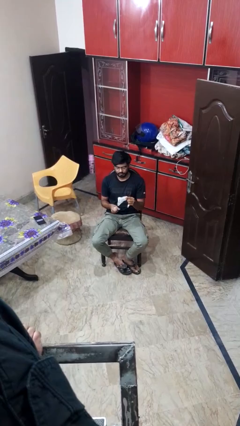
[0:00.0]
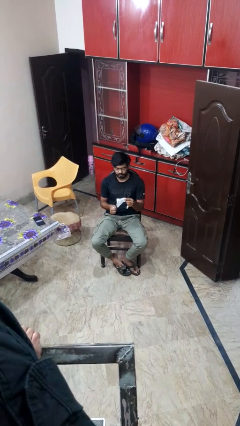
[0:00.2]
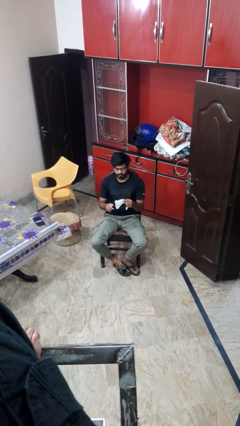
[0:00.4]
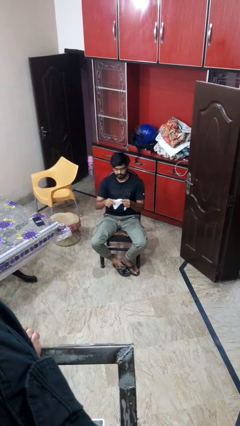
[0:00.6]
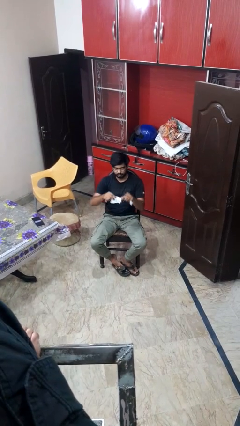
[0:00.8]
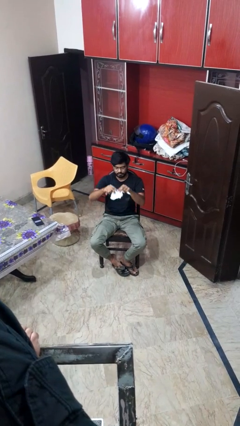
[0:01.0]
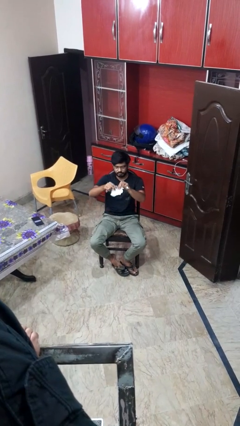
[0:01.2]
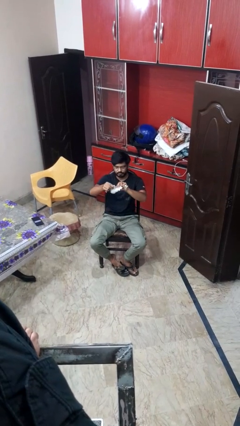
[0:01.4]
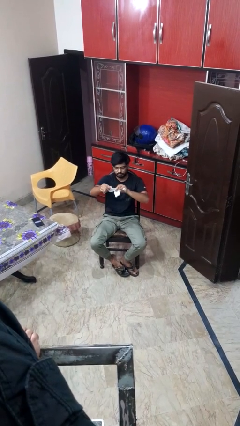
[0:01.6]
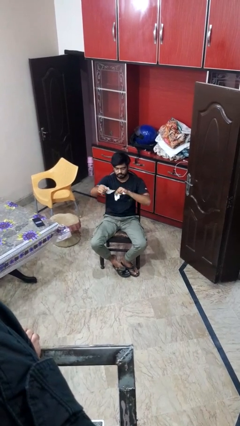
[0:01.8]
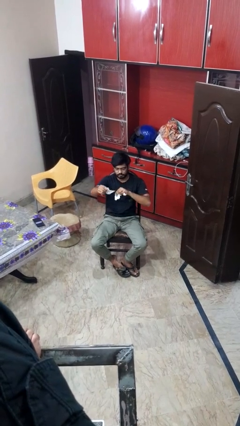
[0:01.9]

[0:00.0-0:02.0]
person tears paper

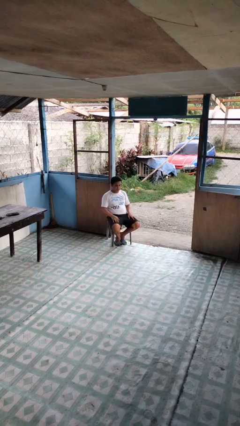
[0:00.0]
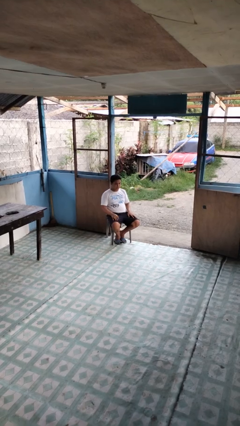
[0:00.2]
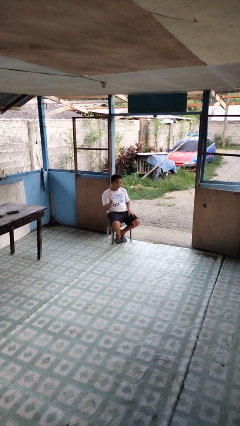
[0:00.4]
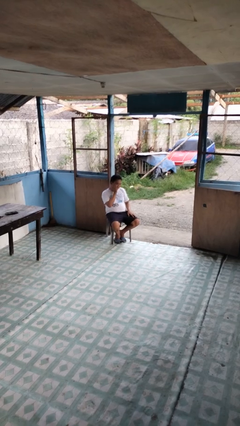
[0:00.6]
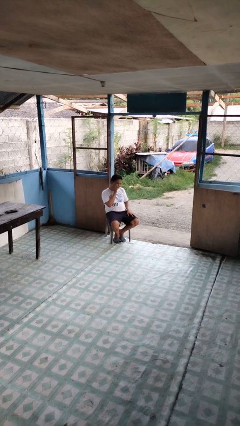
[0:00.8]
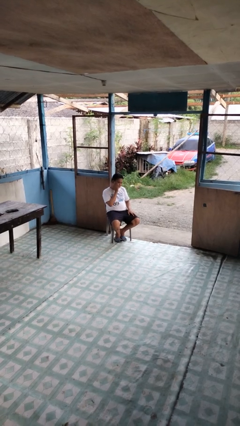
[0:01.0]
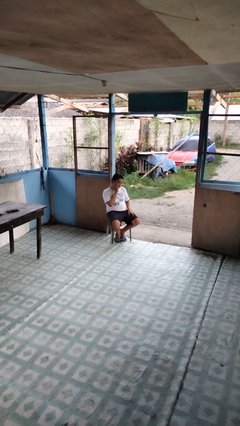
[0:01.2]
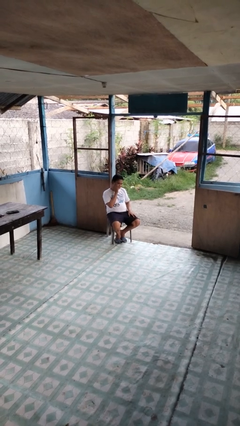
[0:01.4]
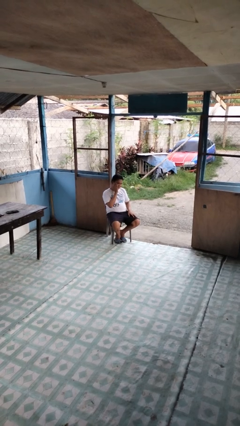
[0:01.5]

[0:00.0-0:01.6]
person swats bug

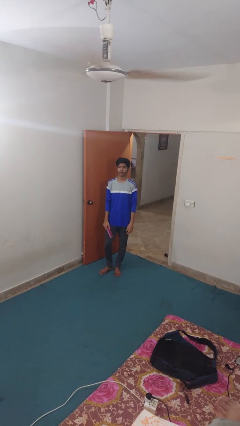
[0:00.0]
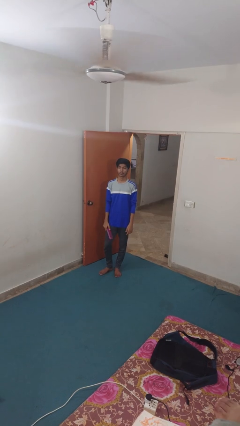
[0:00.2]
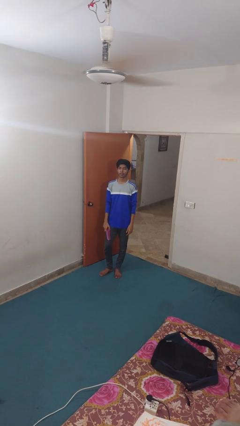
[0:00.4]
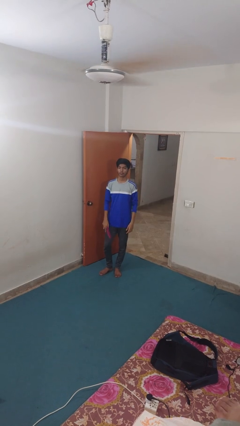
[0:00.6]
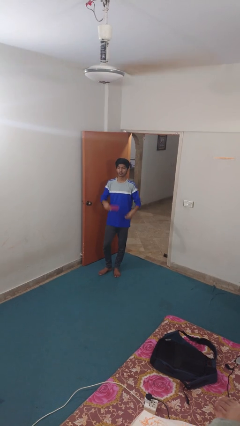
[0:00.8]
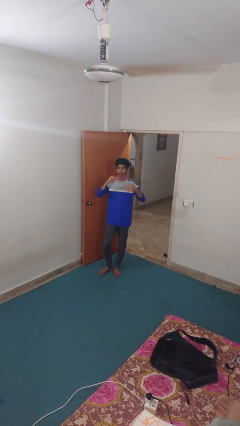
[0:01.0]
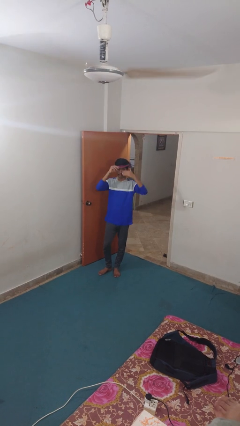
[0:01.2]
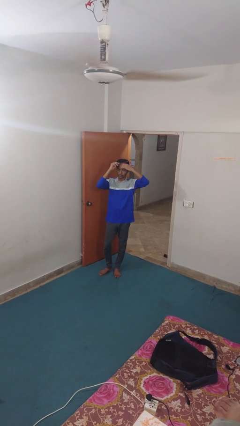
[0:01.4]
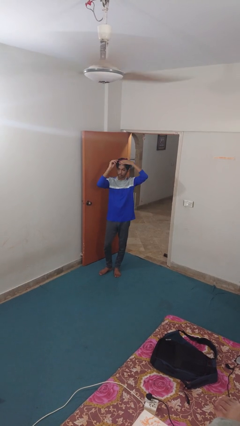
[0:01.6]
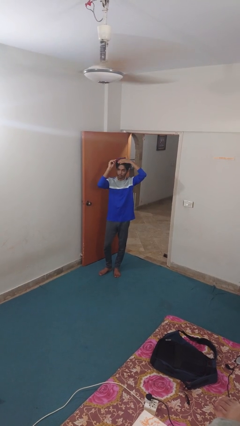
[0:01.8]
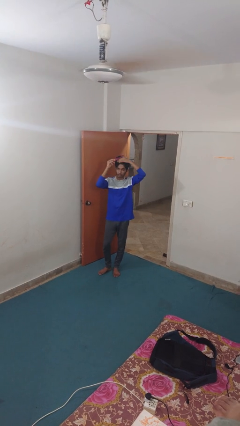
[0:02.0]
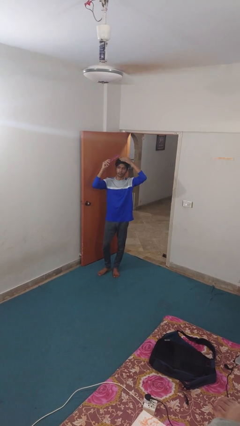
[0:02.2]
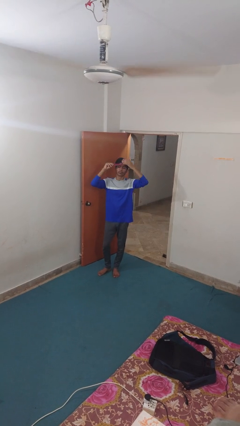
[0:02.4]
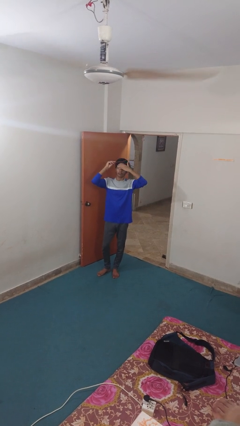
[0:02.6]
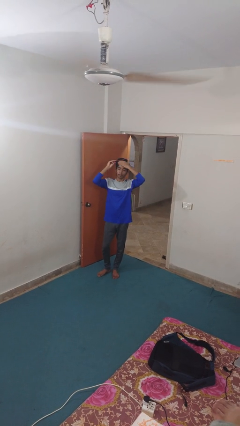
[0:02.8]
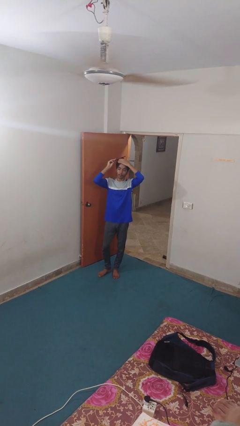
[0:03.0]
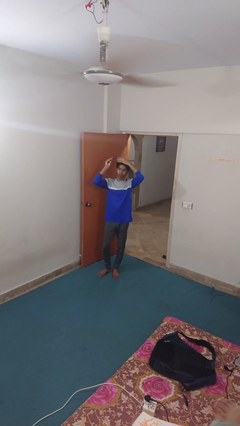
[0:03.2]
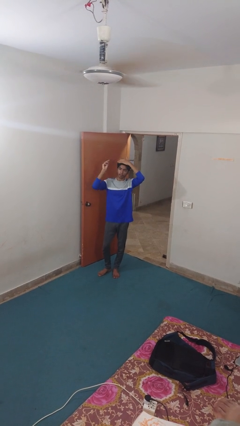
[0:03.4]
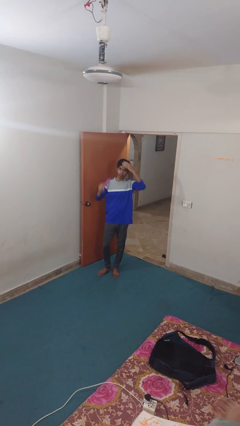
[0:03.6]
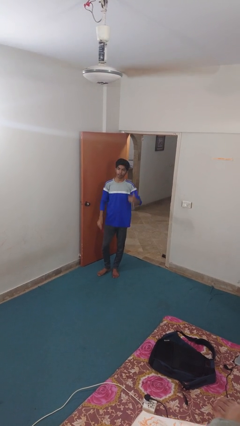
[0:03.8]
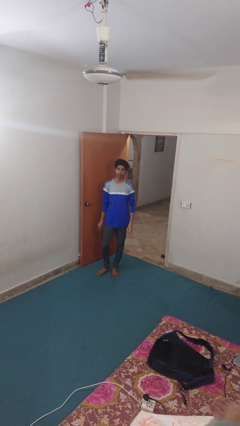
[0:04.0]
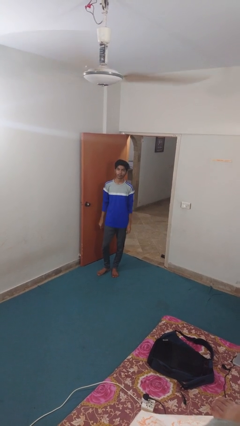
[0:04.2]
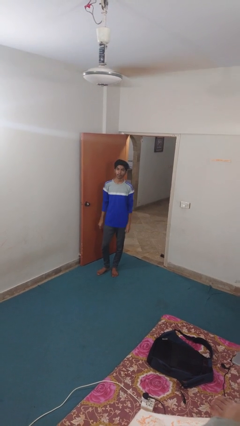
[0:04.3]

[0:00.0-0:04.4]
person brushes hair

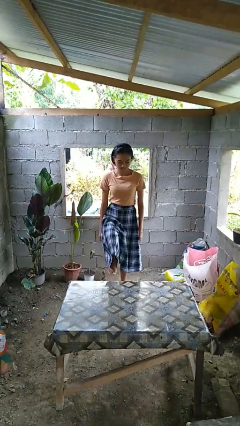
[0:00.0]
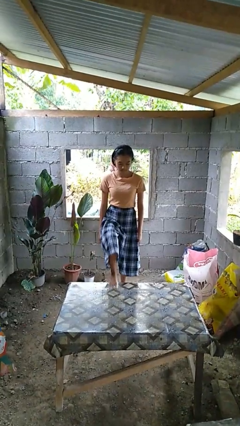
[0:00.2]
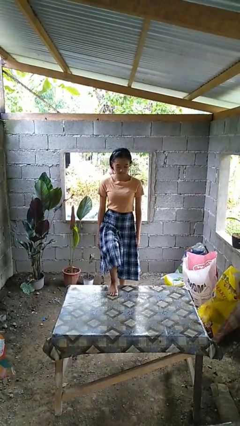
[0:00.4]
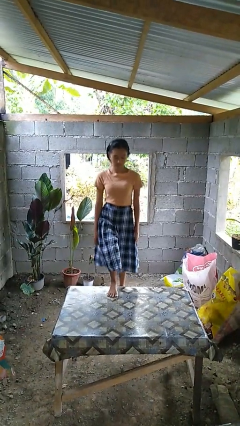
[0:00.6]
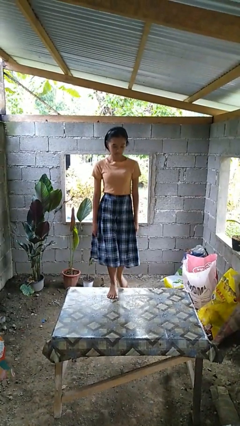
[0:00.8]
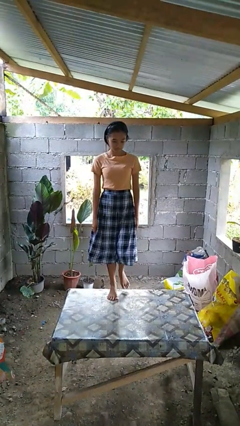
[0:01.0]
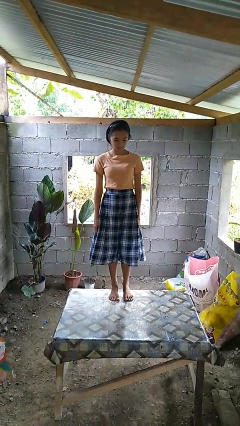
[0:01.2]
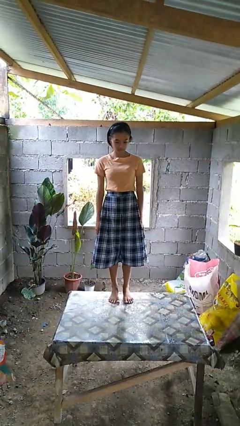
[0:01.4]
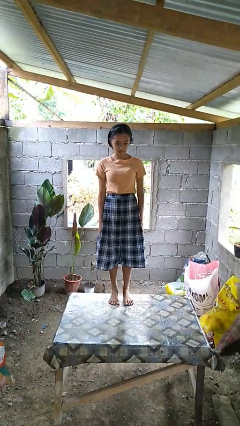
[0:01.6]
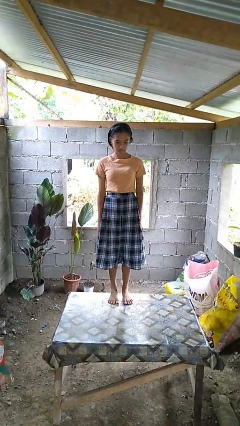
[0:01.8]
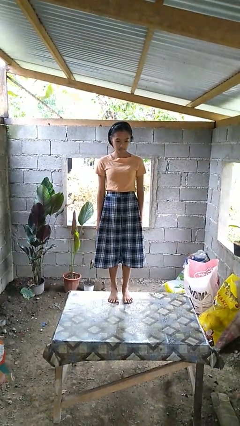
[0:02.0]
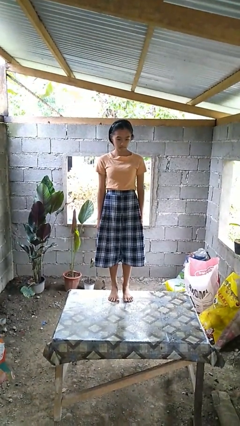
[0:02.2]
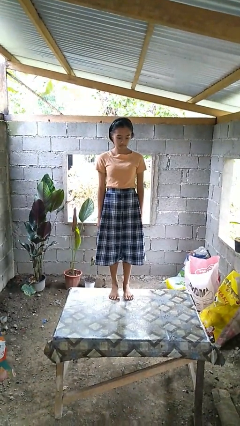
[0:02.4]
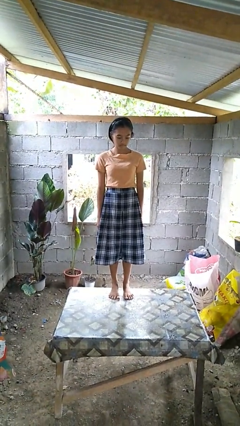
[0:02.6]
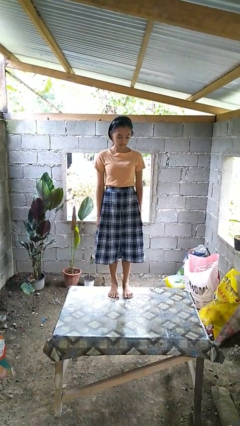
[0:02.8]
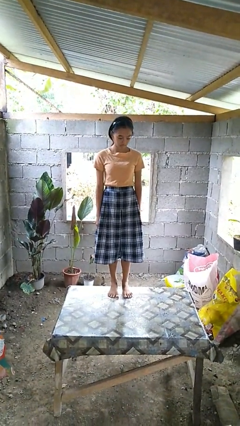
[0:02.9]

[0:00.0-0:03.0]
person climbs on table

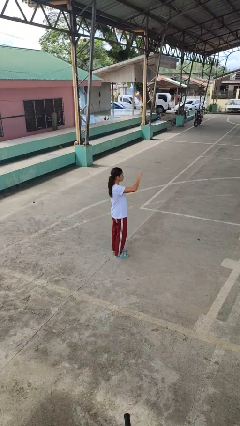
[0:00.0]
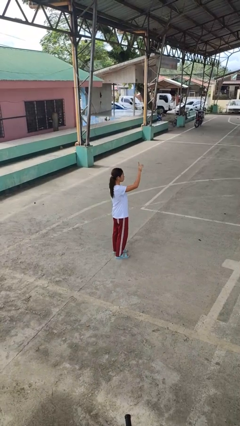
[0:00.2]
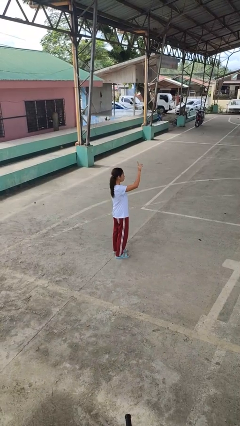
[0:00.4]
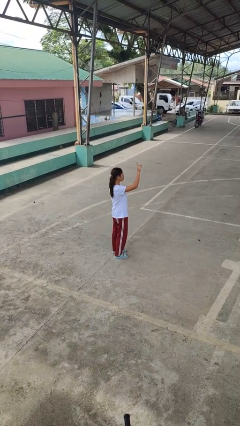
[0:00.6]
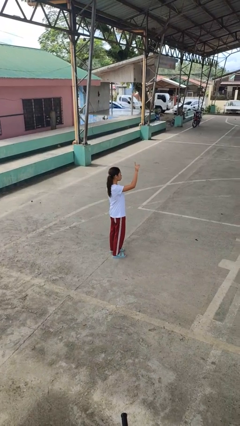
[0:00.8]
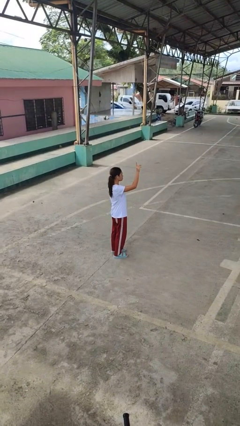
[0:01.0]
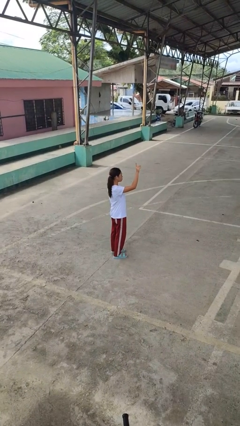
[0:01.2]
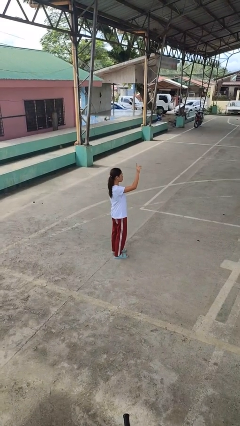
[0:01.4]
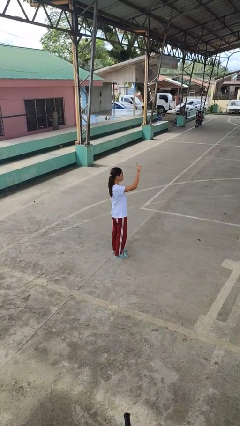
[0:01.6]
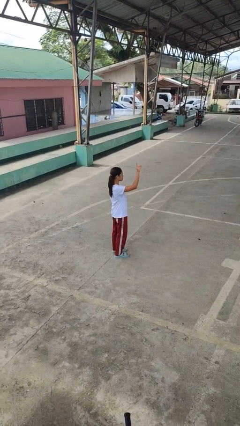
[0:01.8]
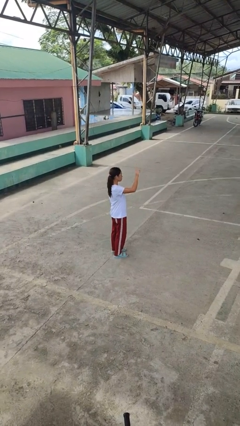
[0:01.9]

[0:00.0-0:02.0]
person gestures swipe up

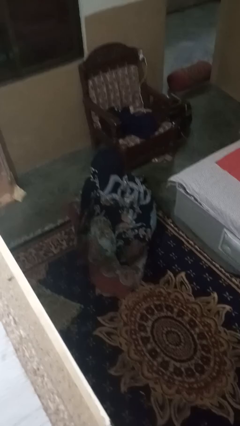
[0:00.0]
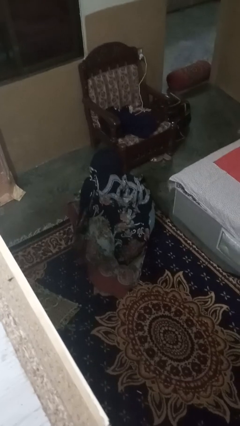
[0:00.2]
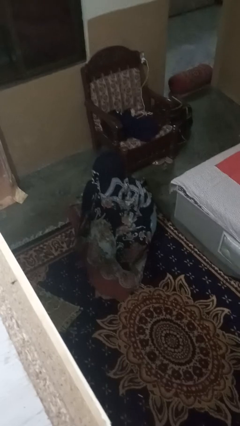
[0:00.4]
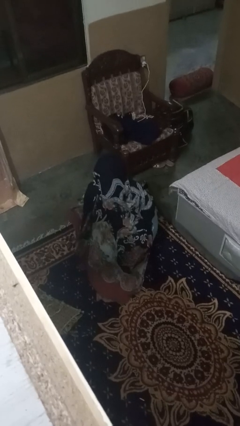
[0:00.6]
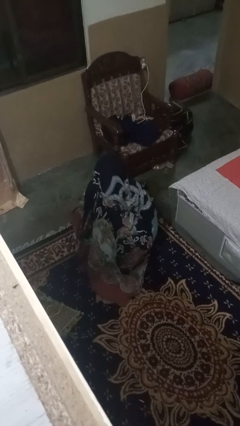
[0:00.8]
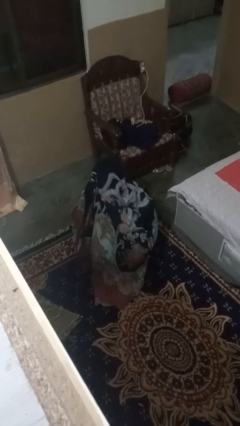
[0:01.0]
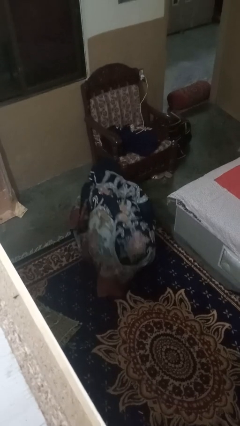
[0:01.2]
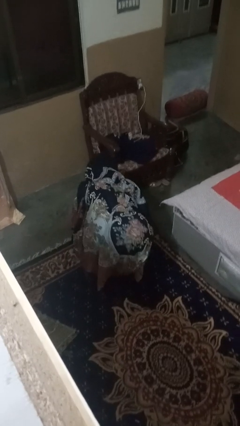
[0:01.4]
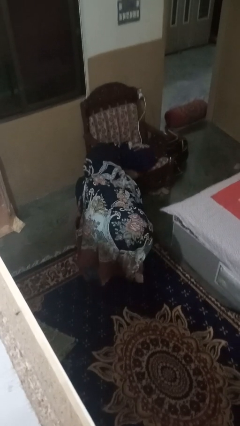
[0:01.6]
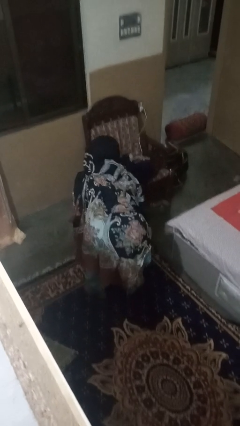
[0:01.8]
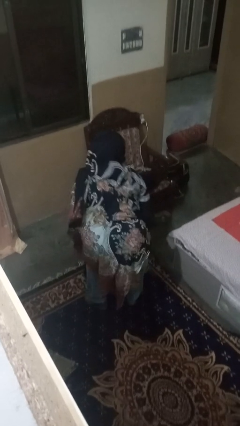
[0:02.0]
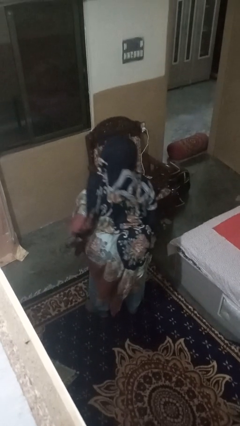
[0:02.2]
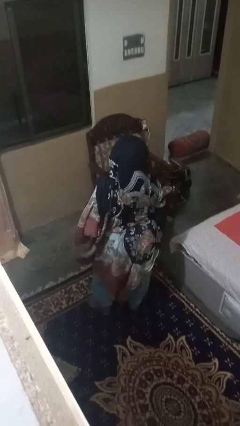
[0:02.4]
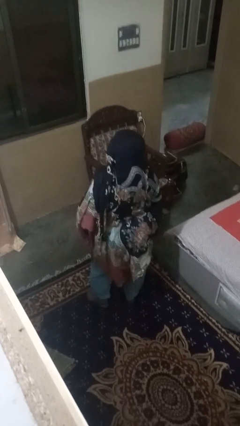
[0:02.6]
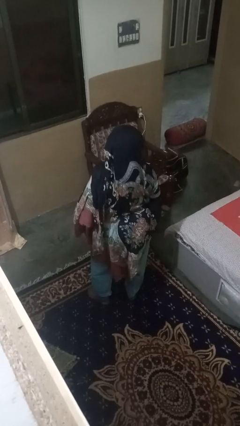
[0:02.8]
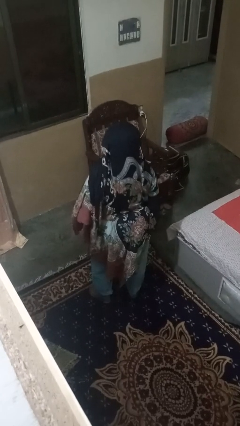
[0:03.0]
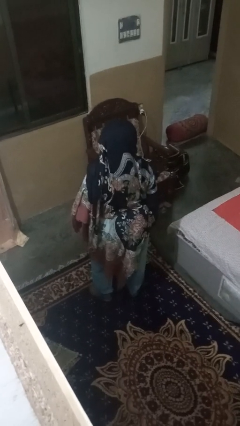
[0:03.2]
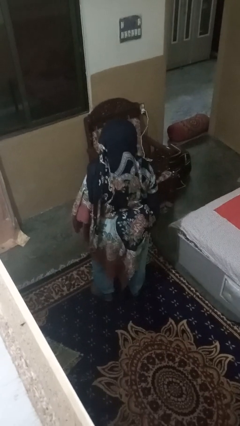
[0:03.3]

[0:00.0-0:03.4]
person stands up

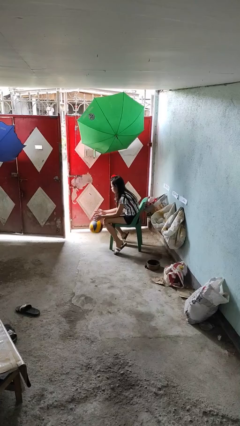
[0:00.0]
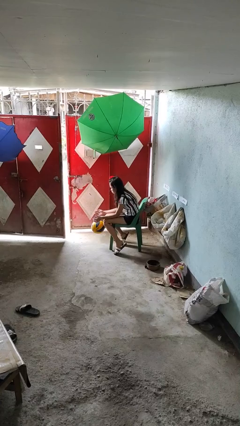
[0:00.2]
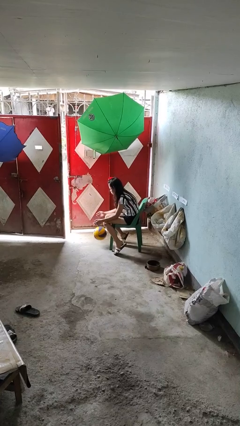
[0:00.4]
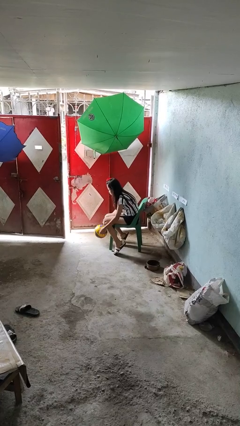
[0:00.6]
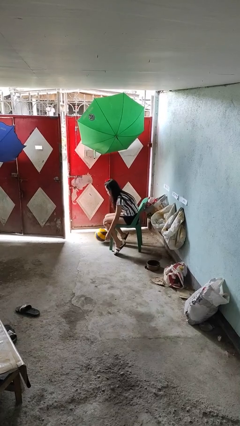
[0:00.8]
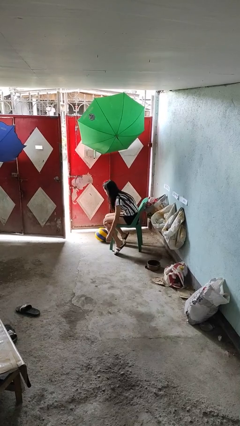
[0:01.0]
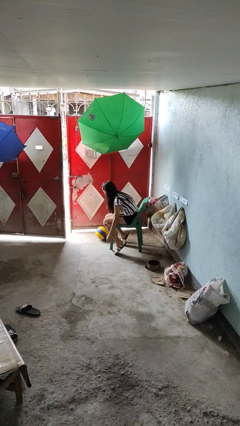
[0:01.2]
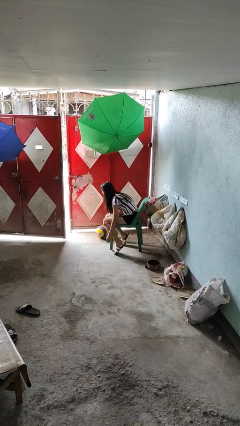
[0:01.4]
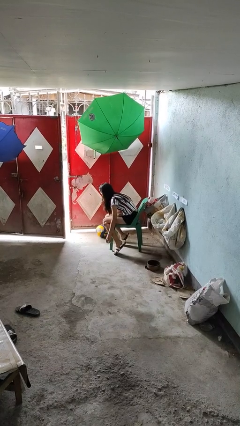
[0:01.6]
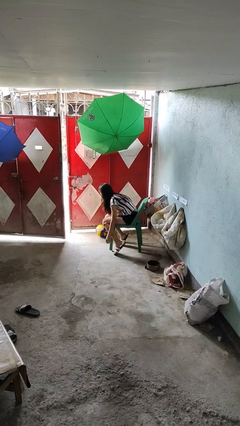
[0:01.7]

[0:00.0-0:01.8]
person drops object
